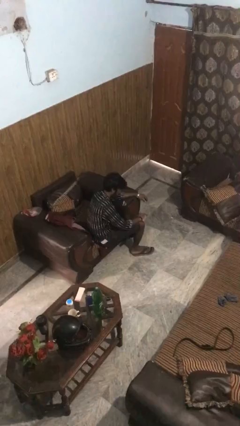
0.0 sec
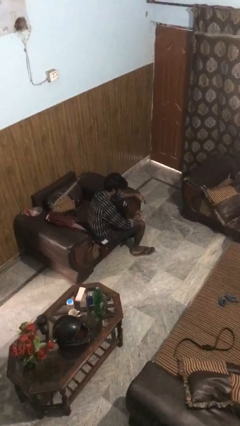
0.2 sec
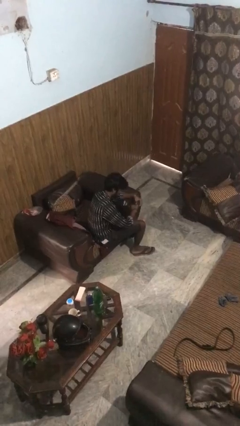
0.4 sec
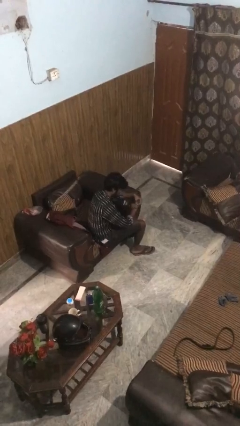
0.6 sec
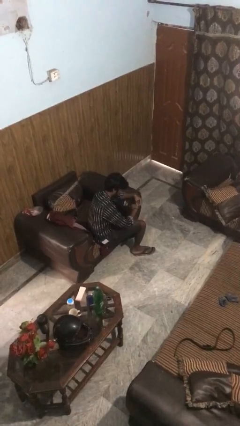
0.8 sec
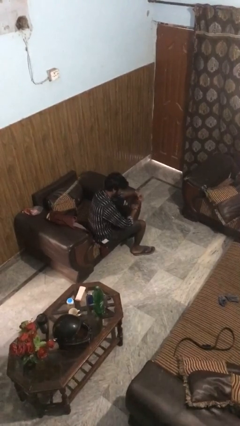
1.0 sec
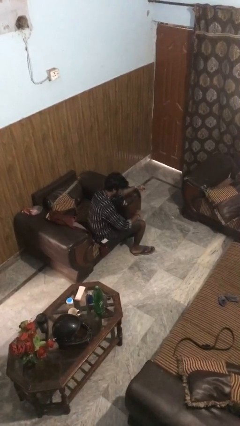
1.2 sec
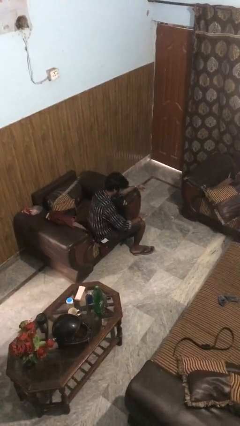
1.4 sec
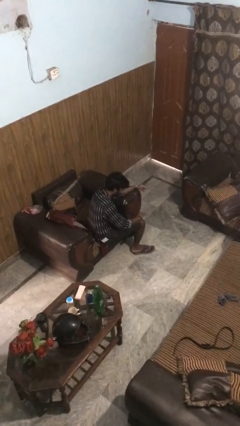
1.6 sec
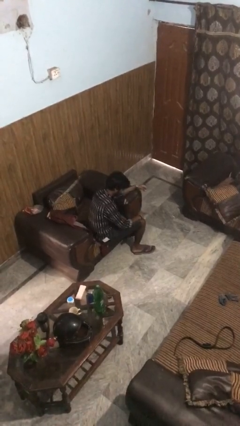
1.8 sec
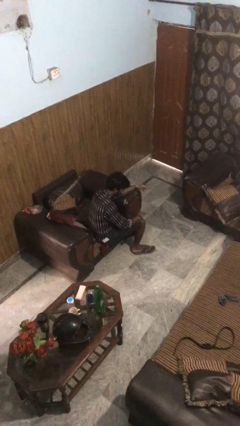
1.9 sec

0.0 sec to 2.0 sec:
person takes off ring

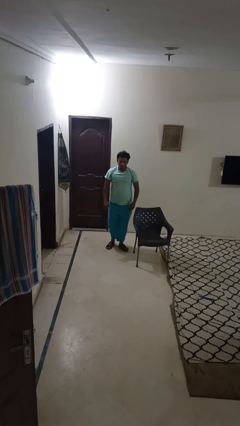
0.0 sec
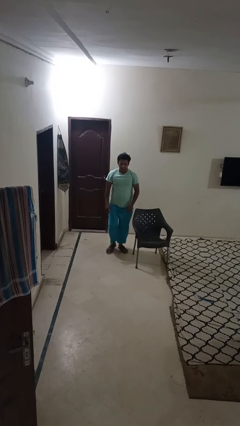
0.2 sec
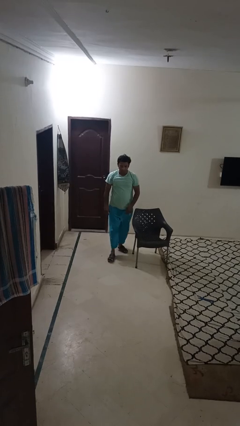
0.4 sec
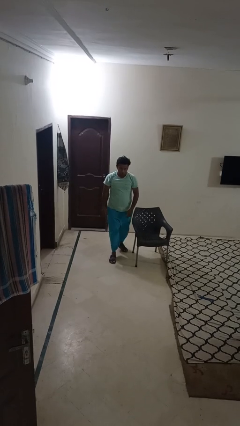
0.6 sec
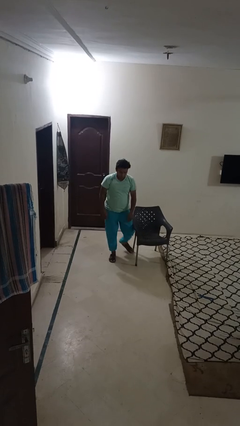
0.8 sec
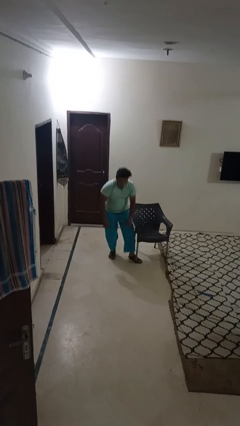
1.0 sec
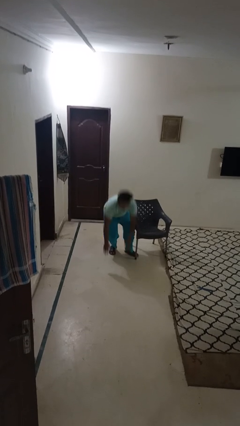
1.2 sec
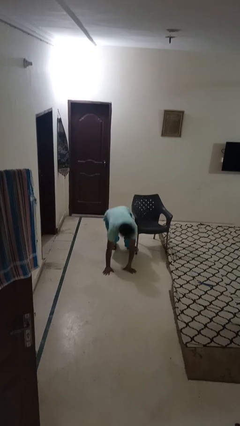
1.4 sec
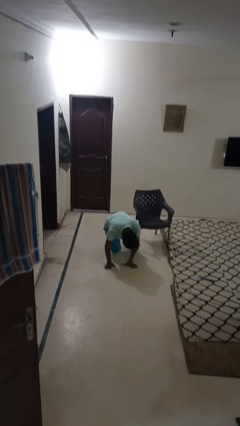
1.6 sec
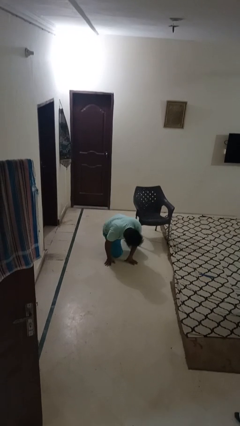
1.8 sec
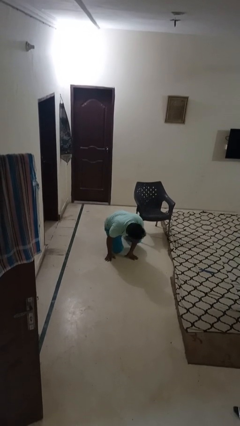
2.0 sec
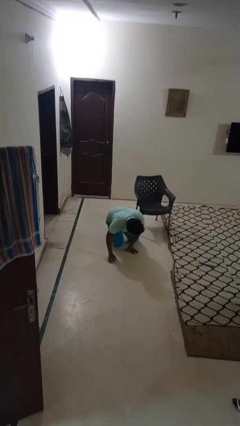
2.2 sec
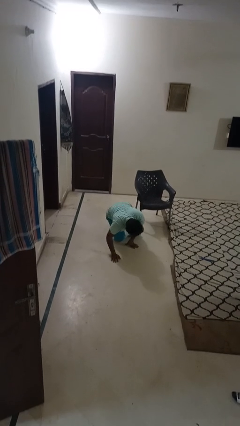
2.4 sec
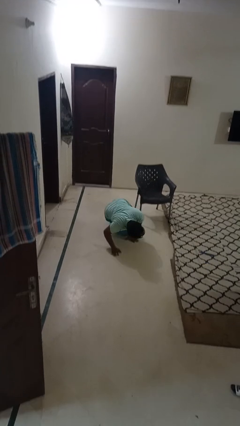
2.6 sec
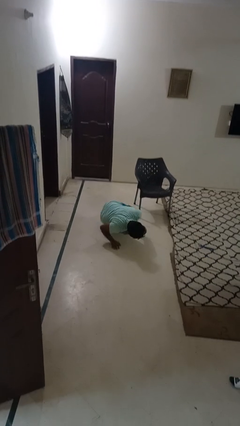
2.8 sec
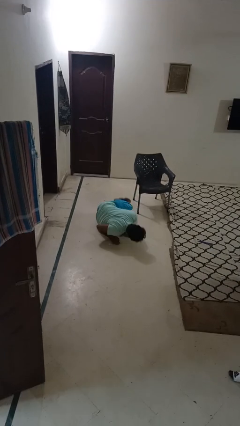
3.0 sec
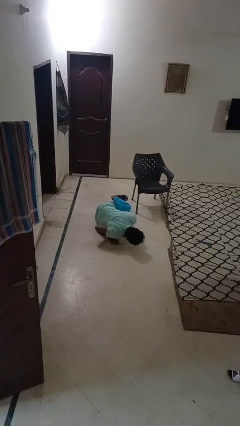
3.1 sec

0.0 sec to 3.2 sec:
person trips on object on floor

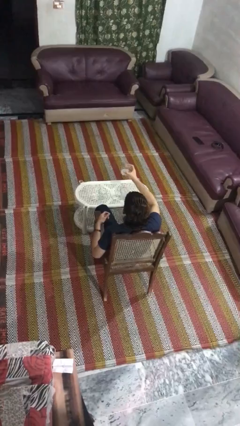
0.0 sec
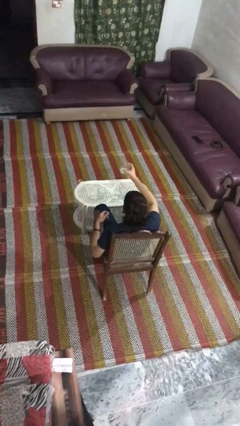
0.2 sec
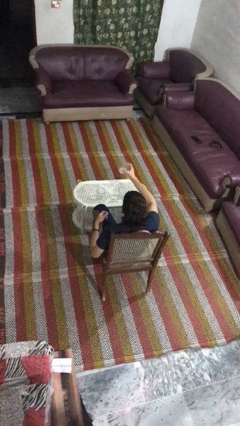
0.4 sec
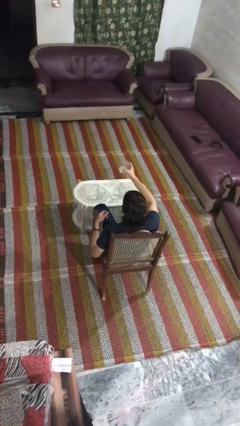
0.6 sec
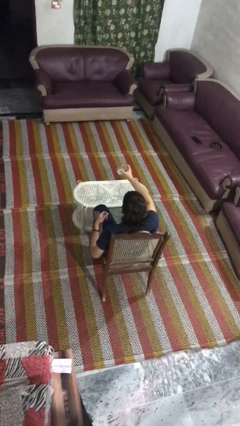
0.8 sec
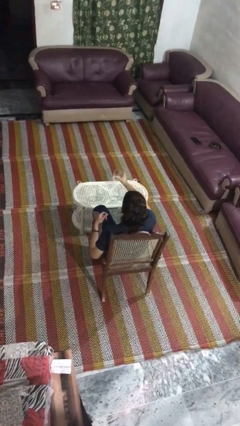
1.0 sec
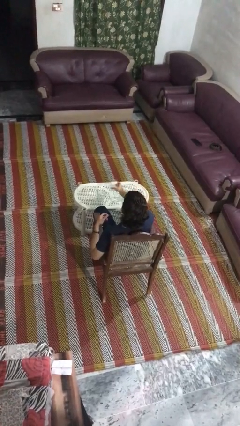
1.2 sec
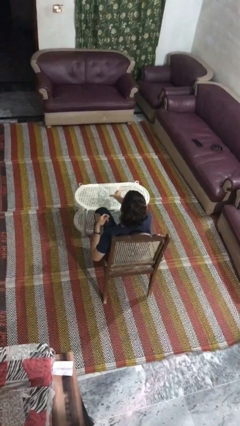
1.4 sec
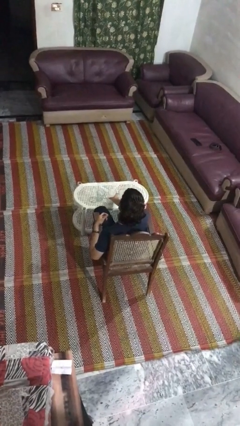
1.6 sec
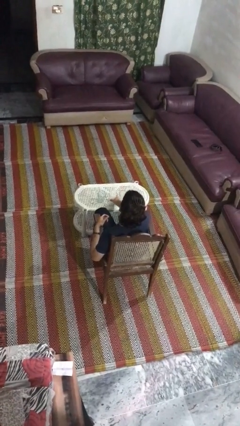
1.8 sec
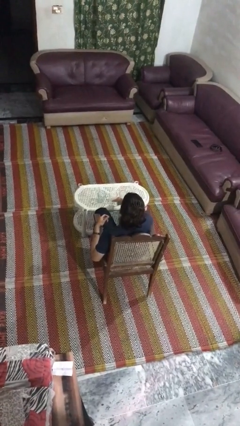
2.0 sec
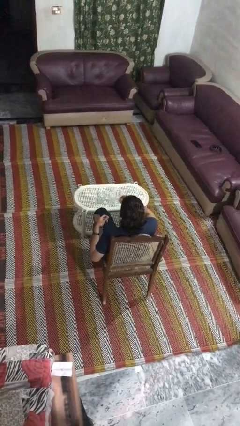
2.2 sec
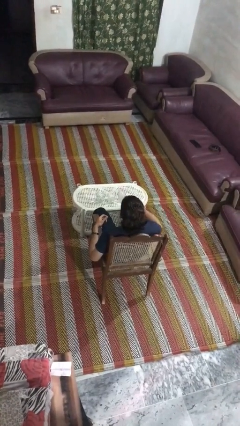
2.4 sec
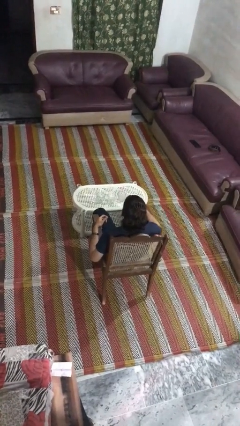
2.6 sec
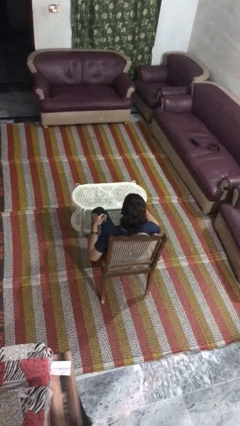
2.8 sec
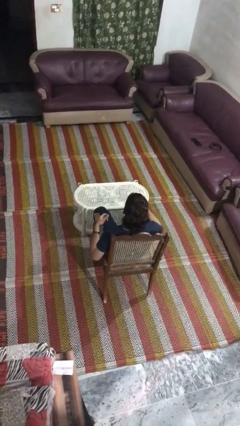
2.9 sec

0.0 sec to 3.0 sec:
person puts down object on table

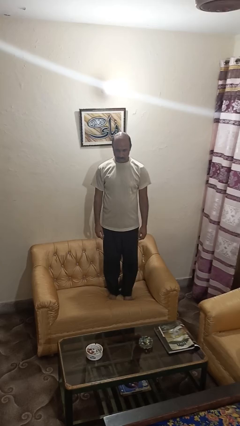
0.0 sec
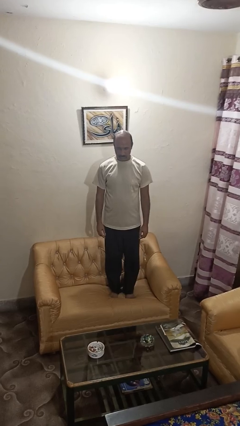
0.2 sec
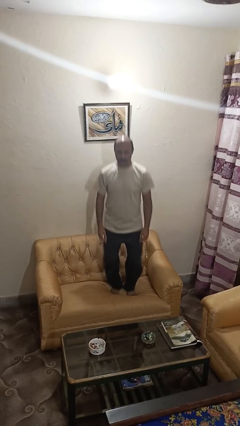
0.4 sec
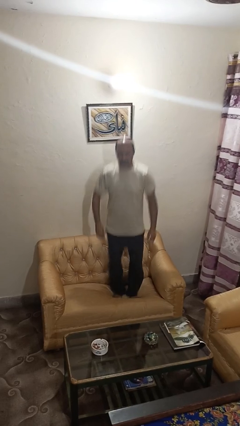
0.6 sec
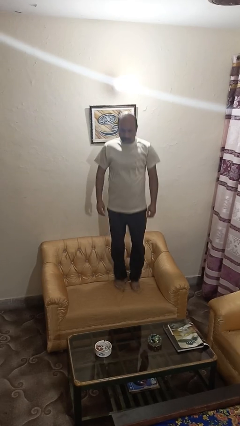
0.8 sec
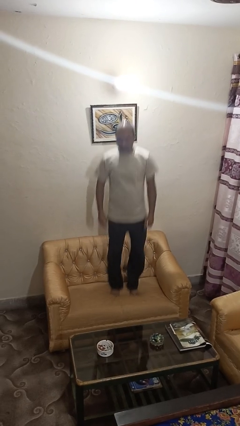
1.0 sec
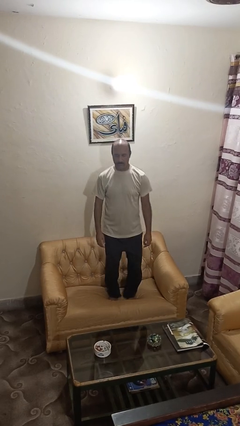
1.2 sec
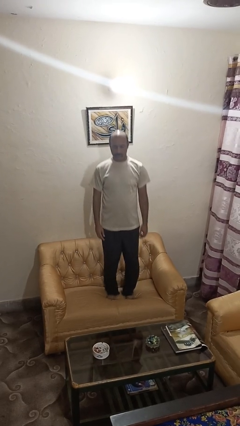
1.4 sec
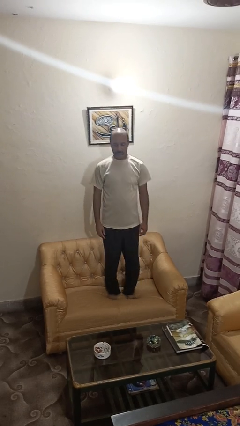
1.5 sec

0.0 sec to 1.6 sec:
person jumps on couch

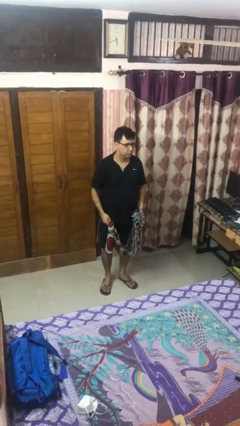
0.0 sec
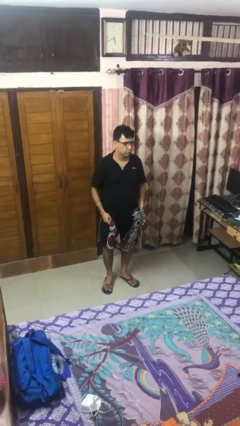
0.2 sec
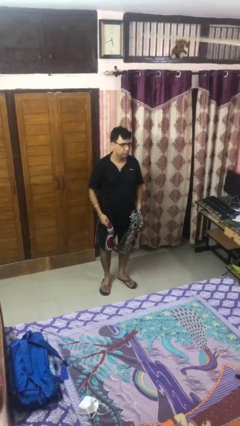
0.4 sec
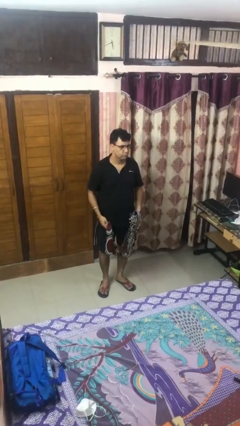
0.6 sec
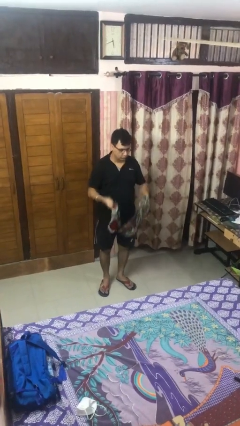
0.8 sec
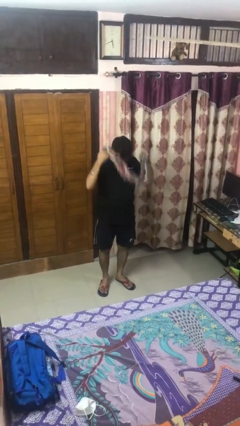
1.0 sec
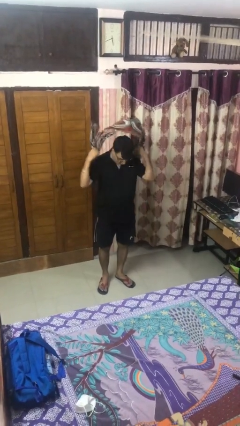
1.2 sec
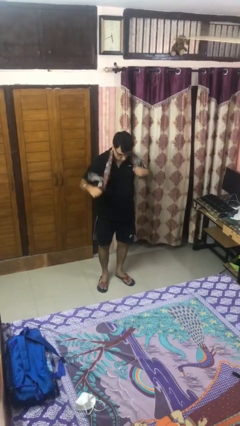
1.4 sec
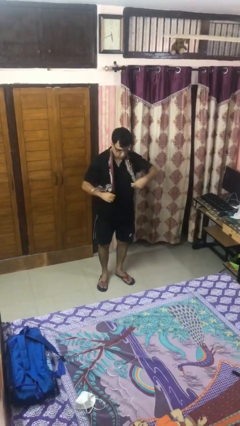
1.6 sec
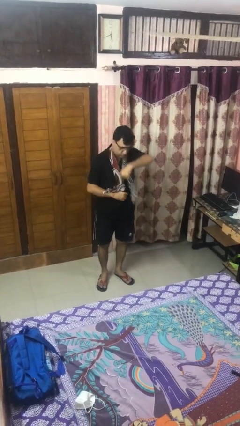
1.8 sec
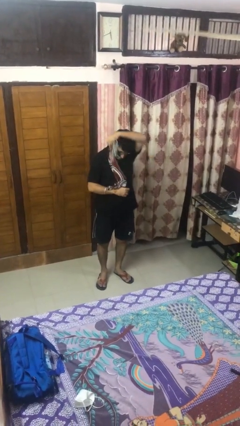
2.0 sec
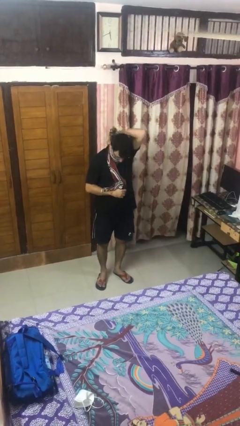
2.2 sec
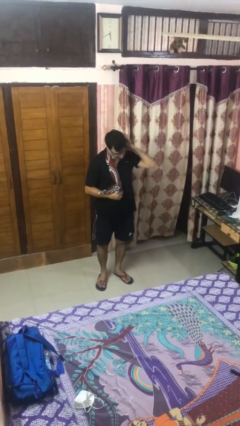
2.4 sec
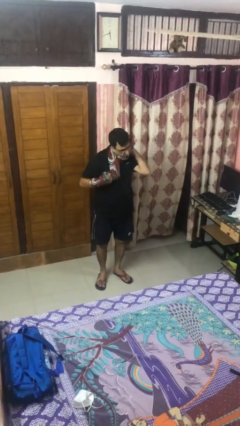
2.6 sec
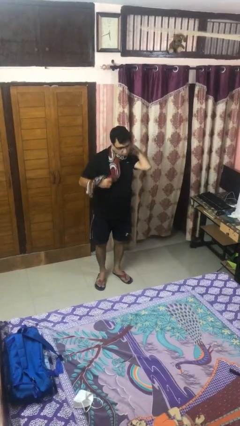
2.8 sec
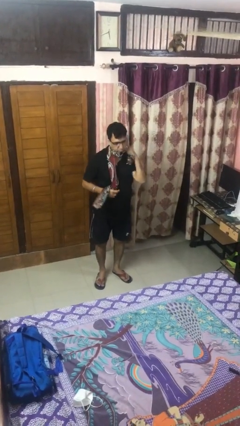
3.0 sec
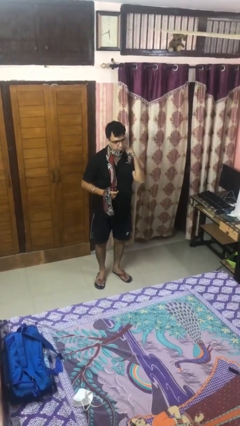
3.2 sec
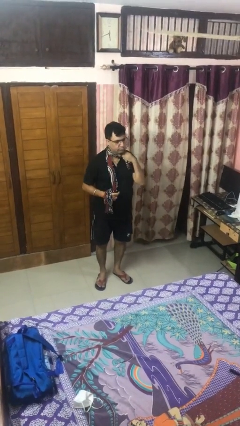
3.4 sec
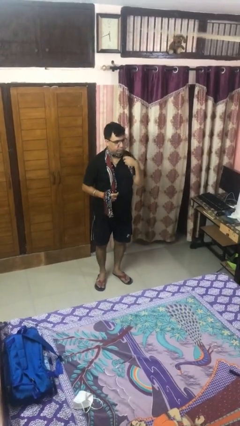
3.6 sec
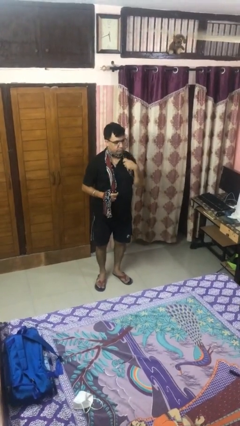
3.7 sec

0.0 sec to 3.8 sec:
person puts on scarf

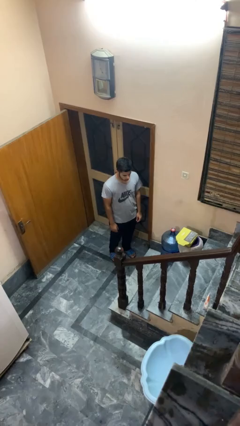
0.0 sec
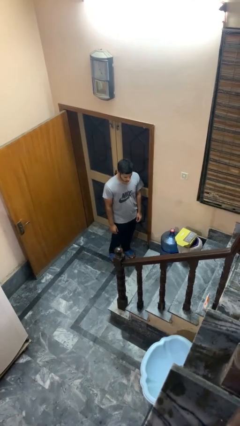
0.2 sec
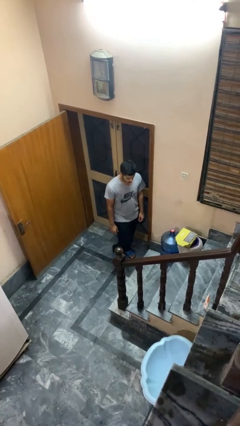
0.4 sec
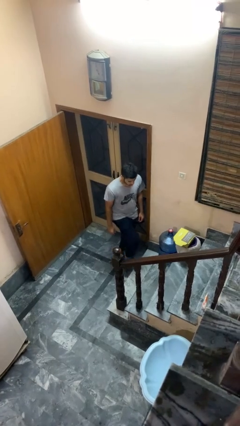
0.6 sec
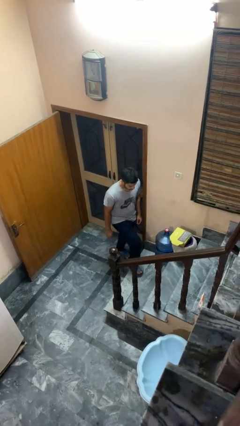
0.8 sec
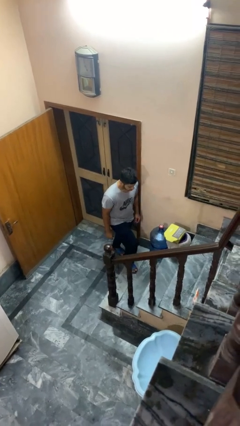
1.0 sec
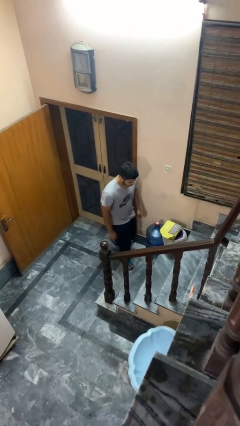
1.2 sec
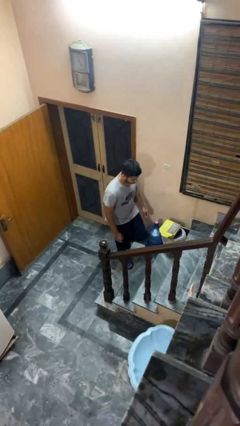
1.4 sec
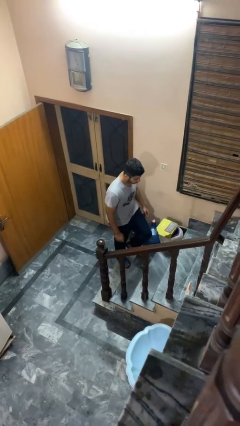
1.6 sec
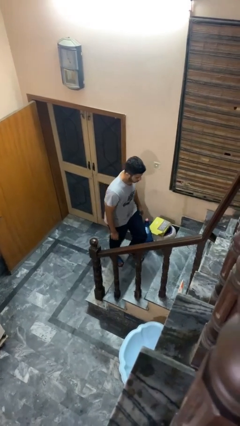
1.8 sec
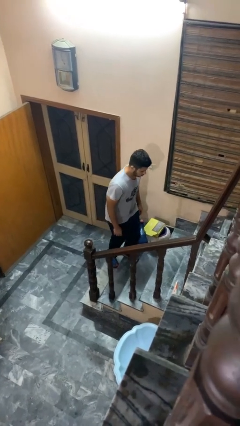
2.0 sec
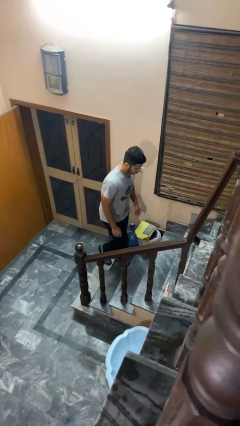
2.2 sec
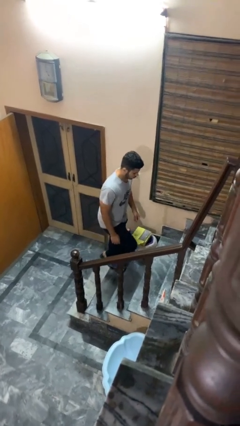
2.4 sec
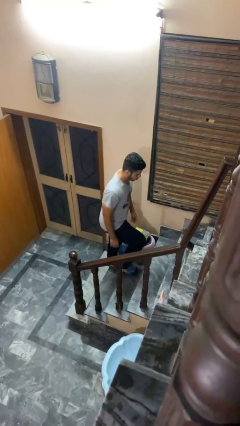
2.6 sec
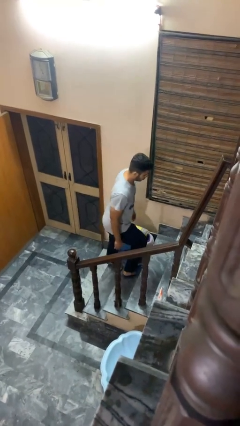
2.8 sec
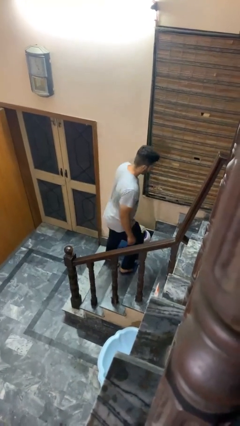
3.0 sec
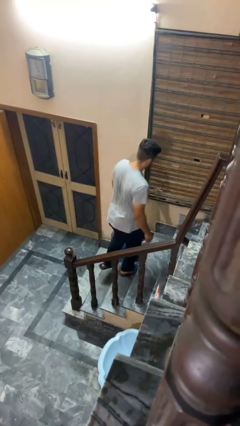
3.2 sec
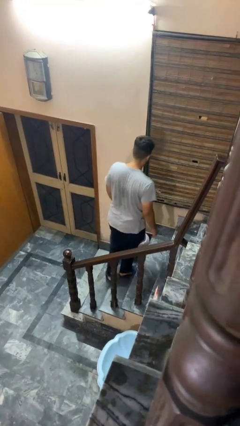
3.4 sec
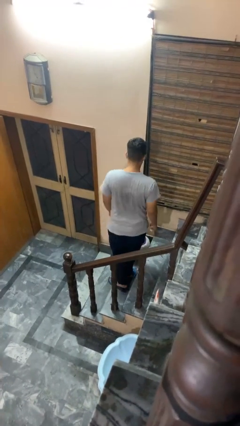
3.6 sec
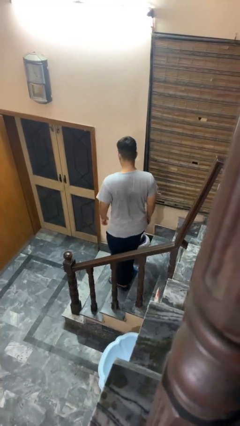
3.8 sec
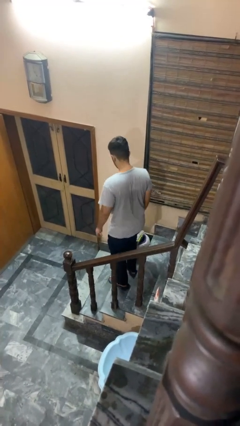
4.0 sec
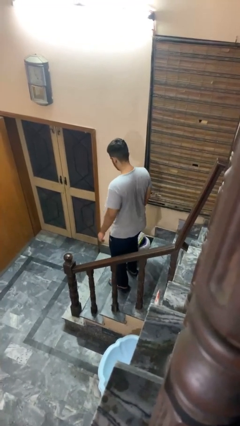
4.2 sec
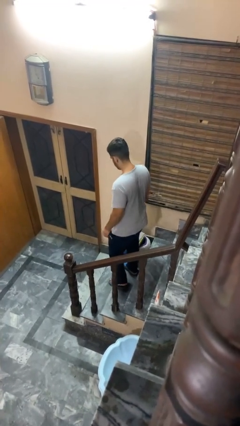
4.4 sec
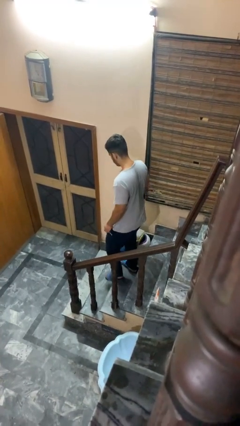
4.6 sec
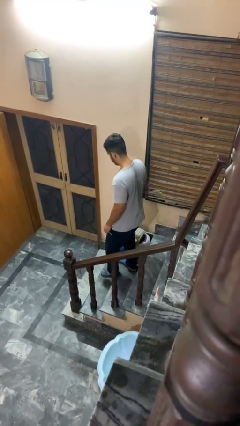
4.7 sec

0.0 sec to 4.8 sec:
person climbs up stairs
